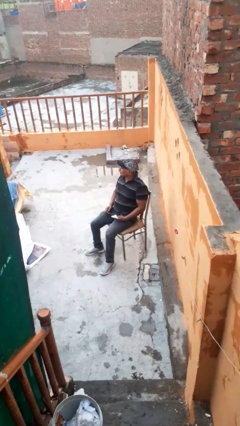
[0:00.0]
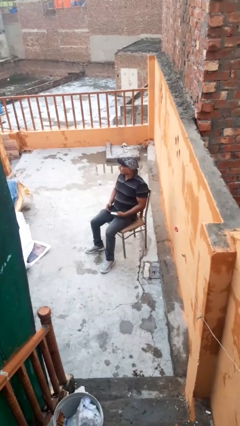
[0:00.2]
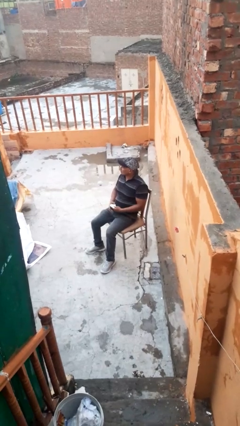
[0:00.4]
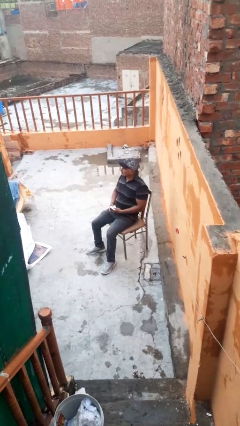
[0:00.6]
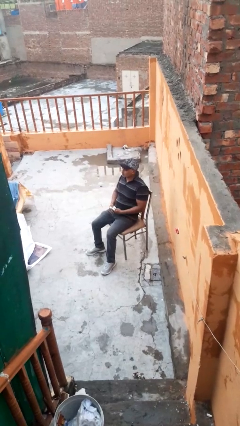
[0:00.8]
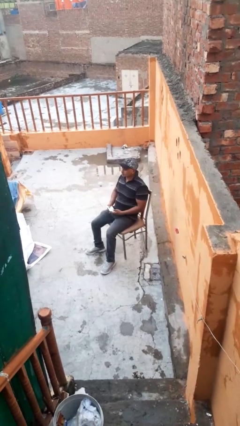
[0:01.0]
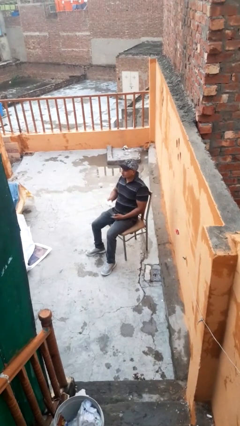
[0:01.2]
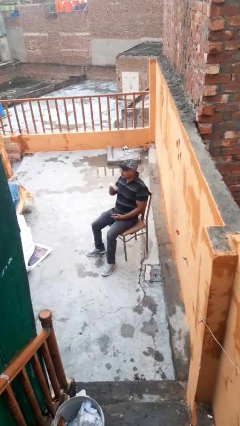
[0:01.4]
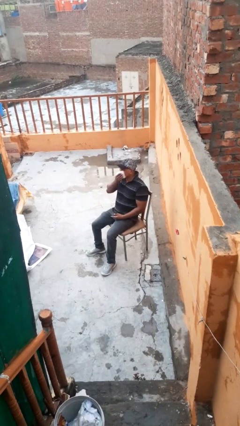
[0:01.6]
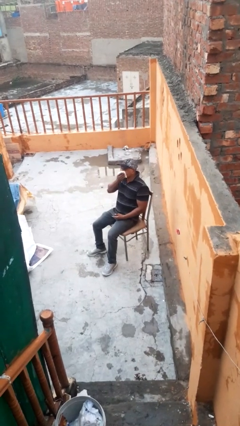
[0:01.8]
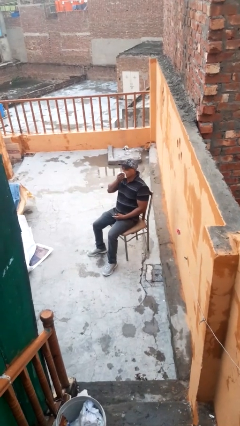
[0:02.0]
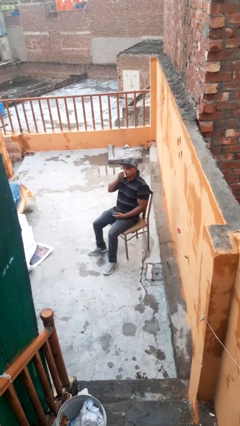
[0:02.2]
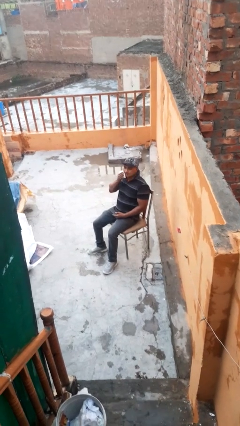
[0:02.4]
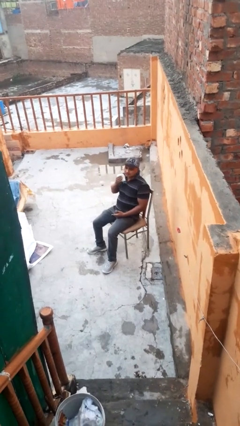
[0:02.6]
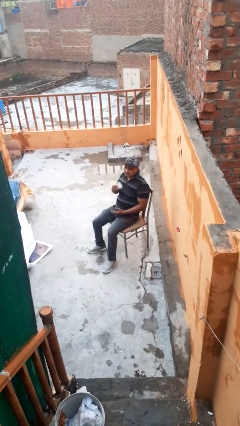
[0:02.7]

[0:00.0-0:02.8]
person wipes mouth with napkin

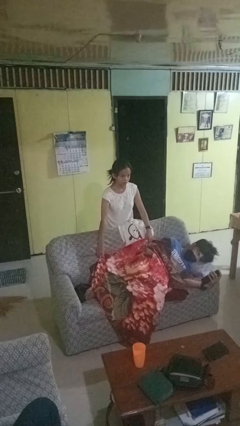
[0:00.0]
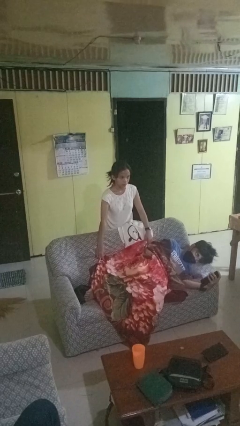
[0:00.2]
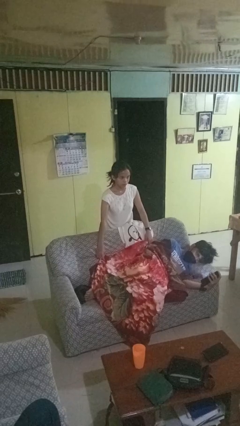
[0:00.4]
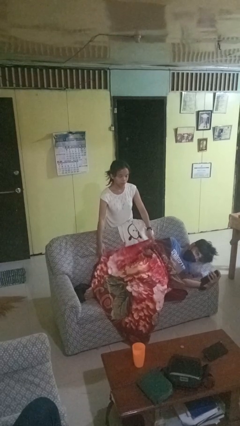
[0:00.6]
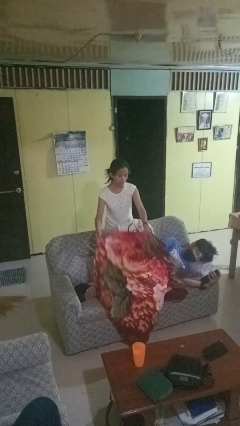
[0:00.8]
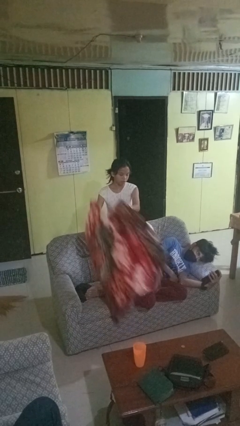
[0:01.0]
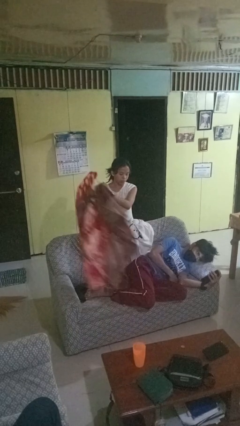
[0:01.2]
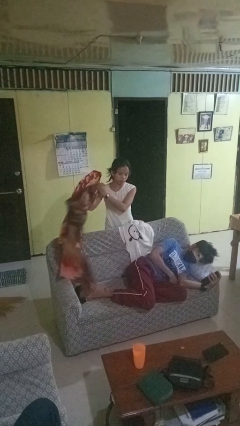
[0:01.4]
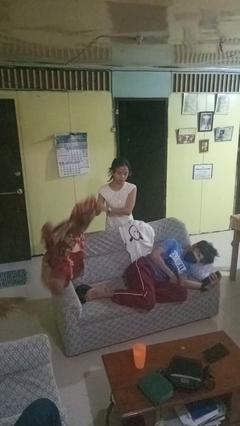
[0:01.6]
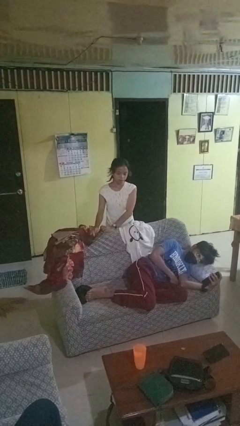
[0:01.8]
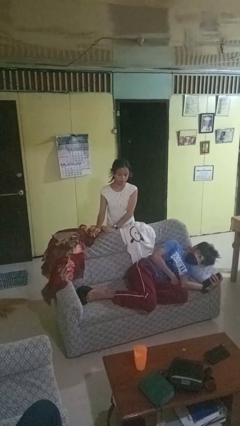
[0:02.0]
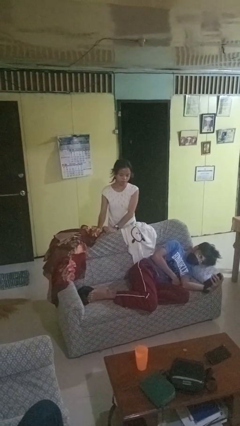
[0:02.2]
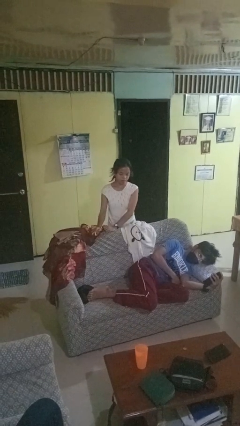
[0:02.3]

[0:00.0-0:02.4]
person uncovers friend with blanket

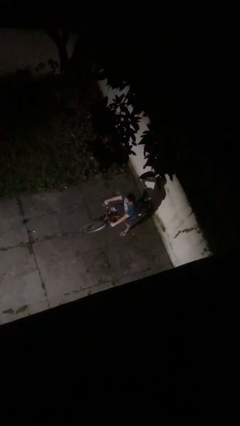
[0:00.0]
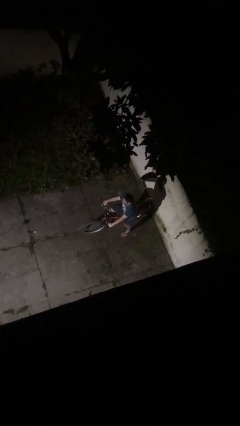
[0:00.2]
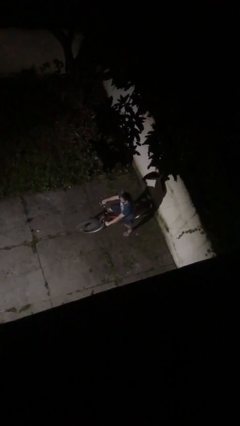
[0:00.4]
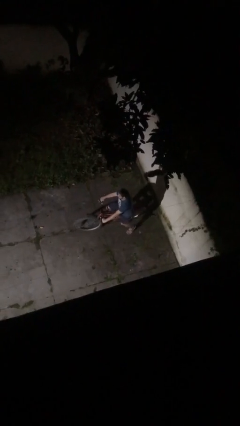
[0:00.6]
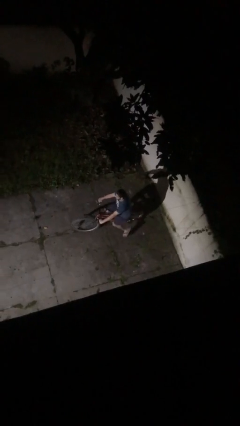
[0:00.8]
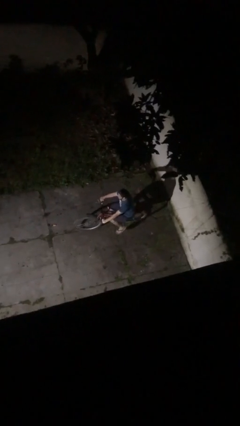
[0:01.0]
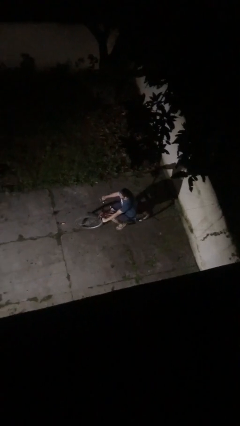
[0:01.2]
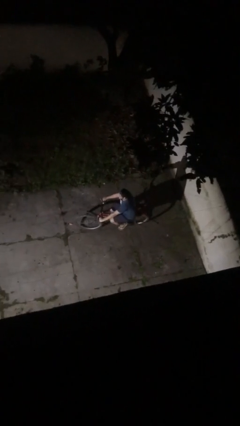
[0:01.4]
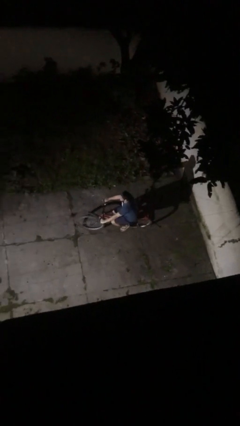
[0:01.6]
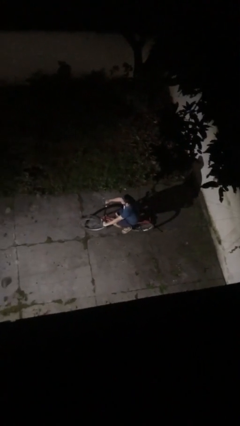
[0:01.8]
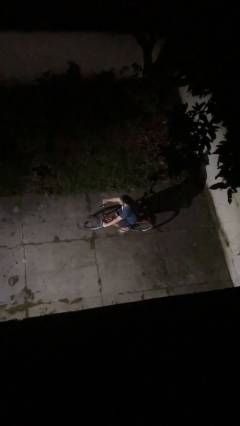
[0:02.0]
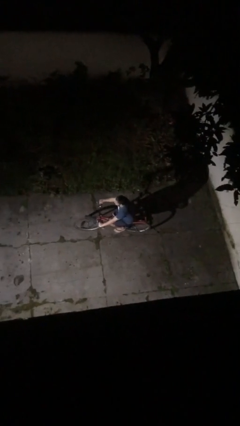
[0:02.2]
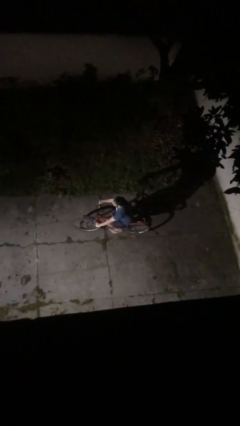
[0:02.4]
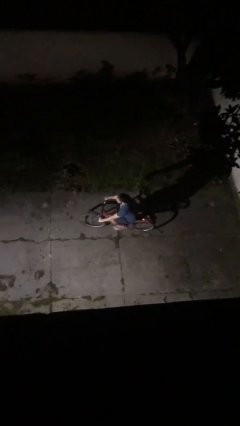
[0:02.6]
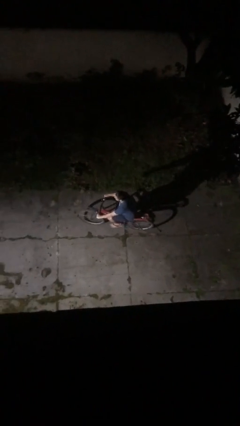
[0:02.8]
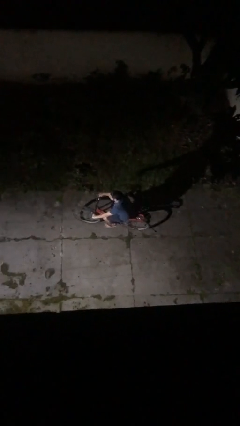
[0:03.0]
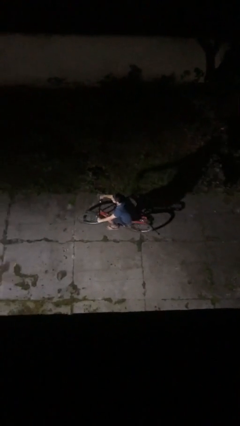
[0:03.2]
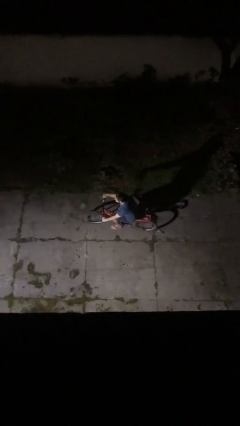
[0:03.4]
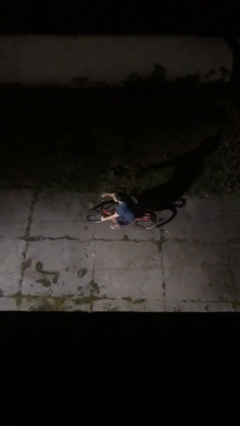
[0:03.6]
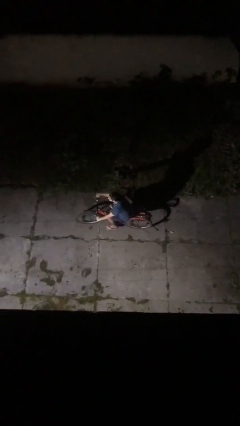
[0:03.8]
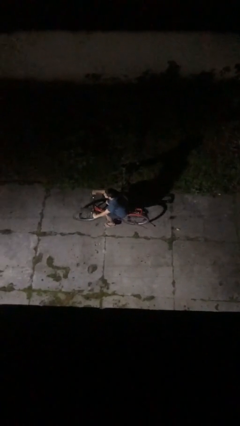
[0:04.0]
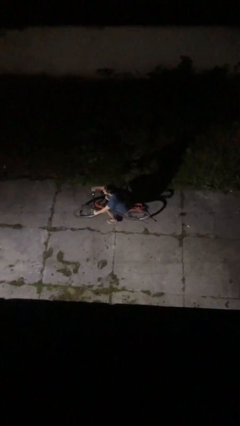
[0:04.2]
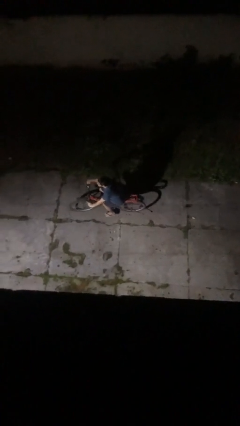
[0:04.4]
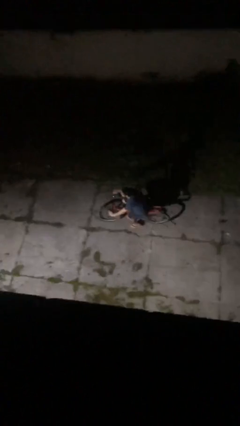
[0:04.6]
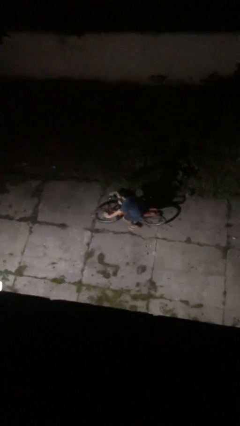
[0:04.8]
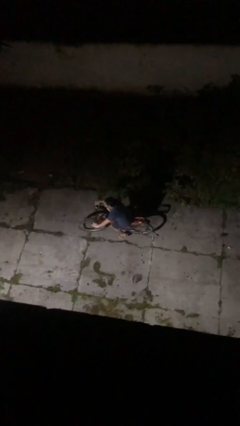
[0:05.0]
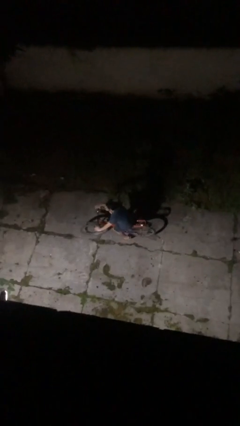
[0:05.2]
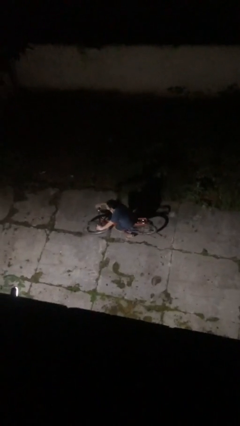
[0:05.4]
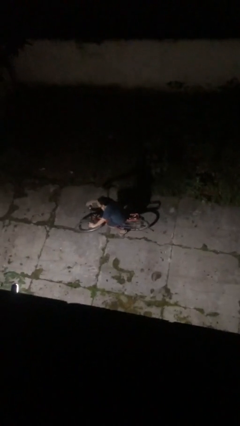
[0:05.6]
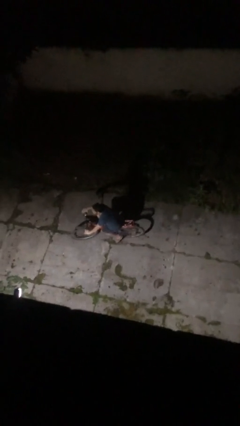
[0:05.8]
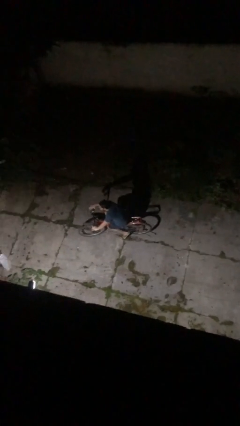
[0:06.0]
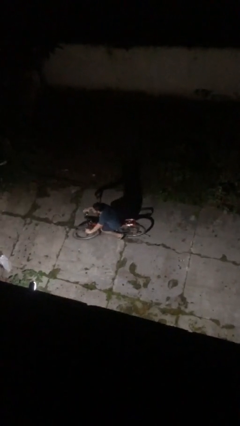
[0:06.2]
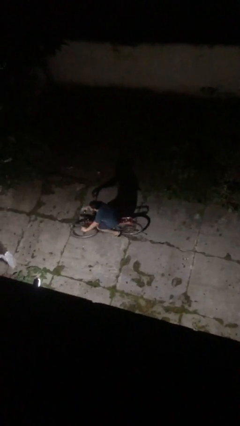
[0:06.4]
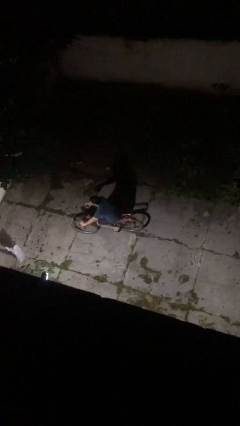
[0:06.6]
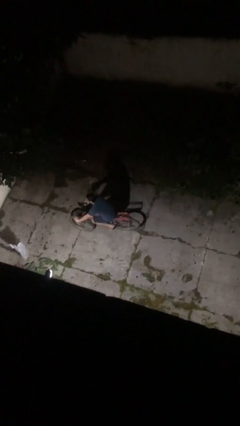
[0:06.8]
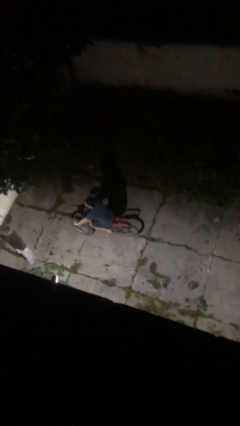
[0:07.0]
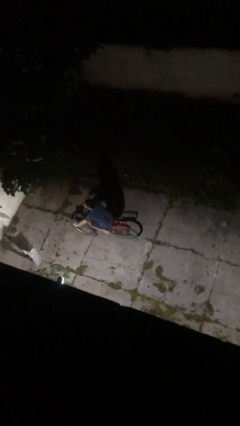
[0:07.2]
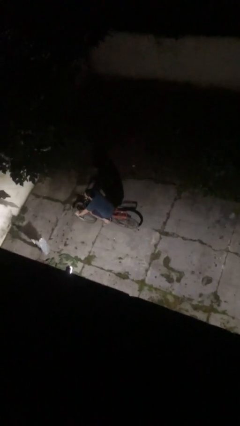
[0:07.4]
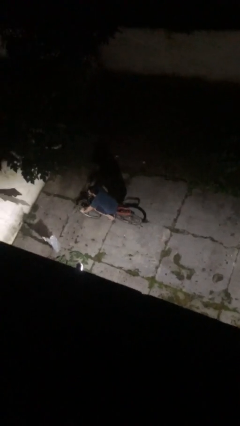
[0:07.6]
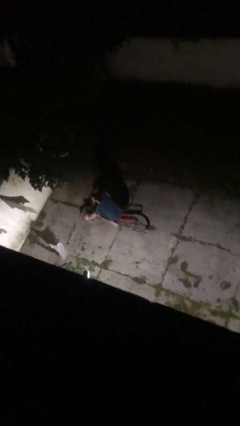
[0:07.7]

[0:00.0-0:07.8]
person rides bicycle

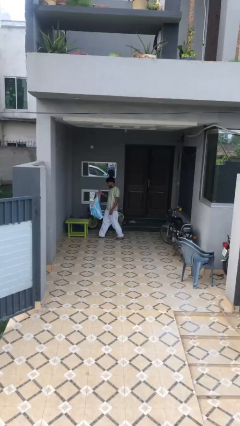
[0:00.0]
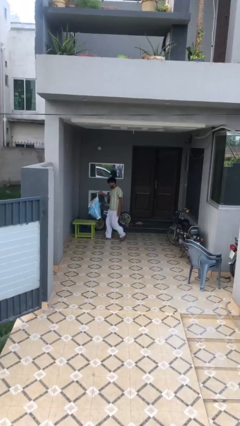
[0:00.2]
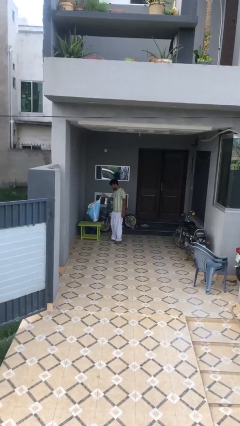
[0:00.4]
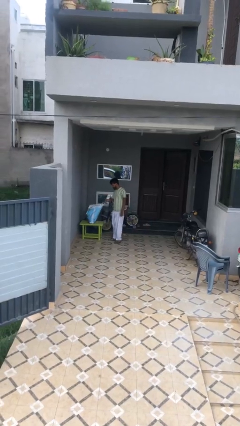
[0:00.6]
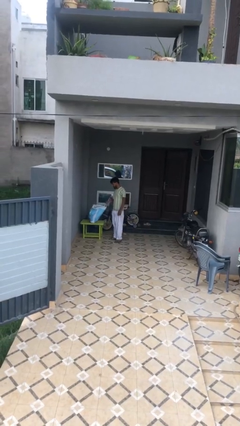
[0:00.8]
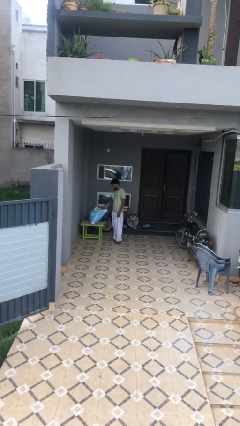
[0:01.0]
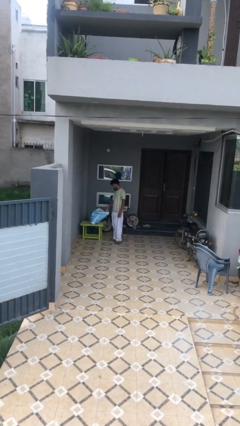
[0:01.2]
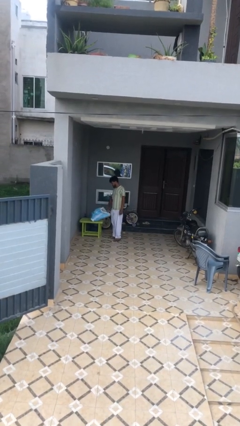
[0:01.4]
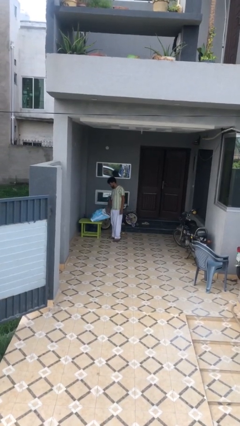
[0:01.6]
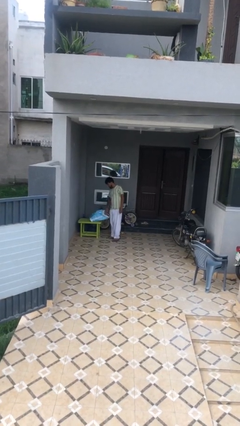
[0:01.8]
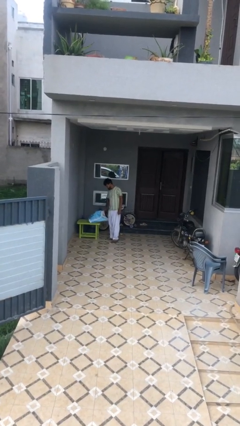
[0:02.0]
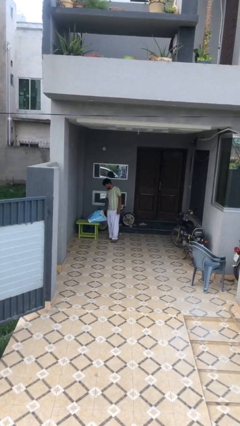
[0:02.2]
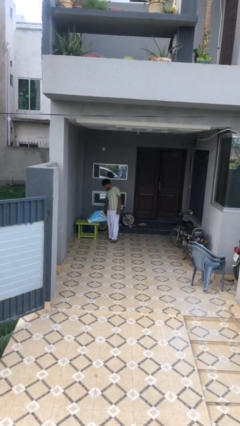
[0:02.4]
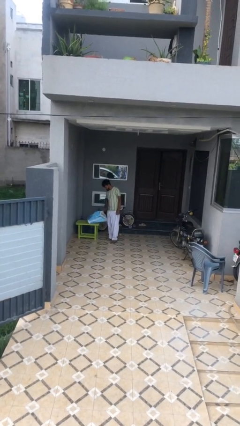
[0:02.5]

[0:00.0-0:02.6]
person puts down object on table

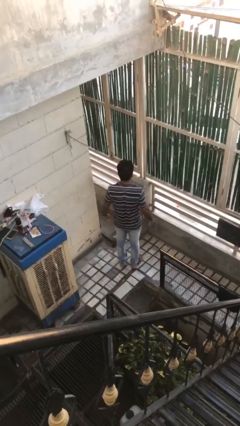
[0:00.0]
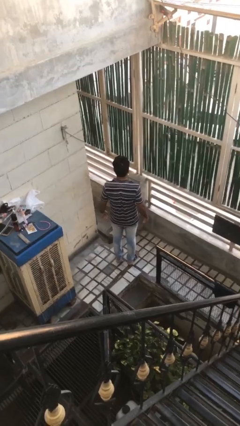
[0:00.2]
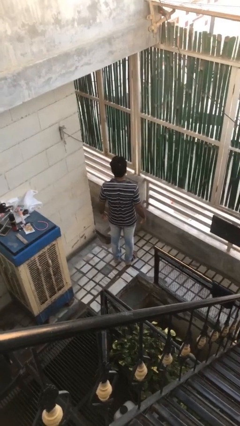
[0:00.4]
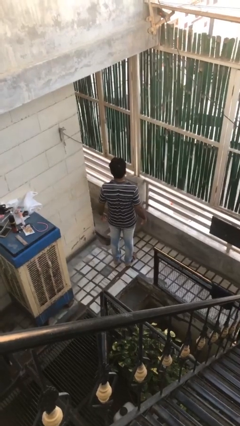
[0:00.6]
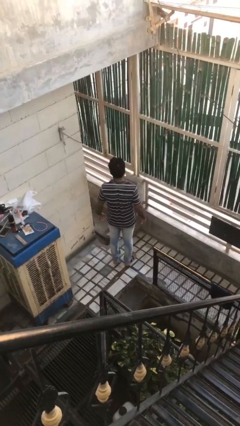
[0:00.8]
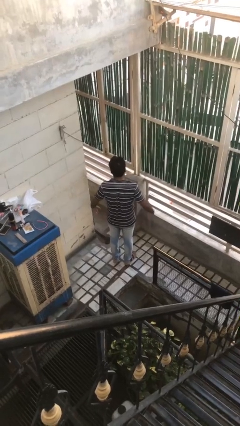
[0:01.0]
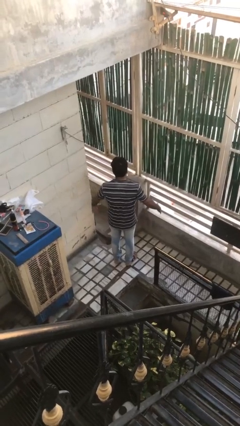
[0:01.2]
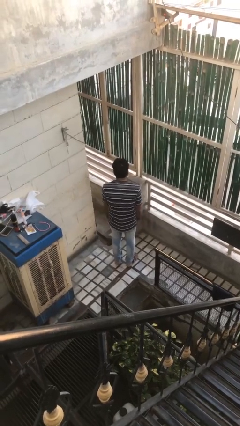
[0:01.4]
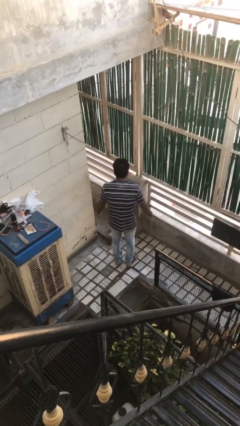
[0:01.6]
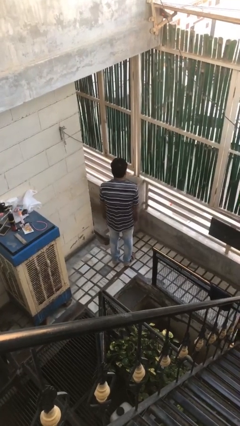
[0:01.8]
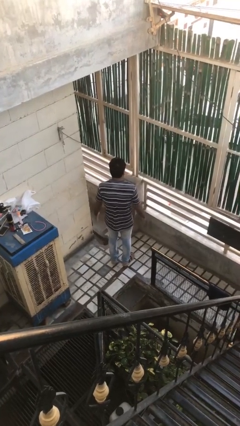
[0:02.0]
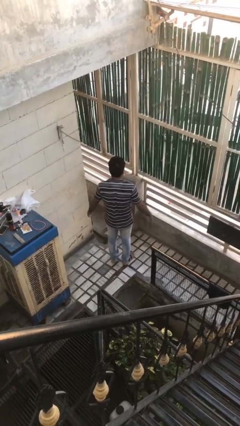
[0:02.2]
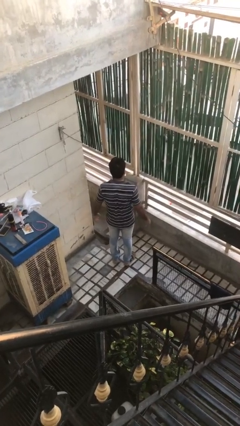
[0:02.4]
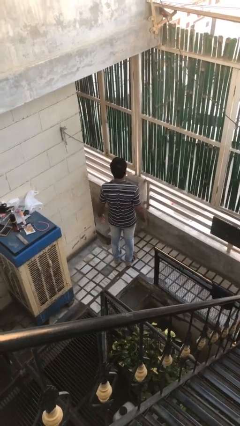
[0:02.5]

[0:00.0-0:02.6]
person slaps hands on thighs
